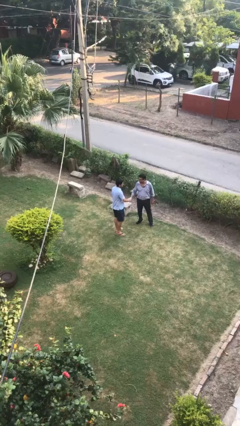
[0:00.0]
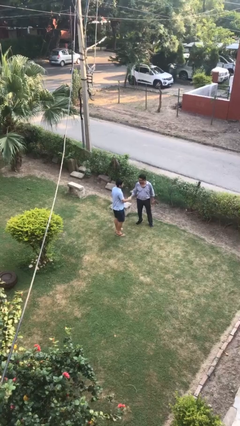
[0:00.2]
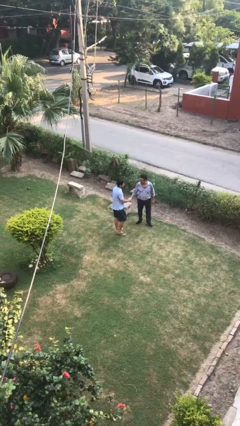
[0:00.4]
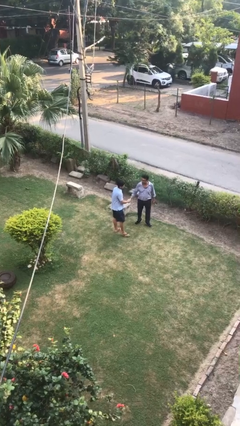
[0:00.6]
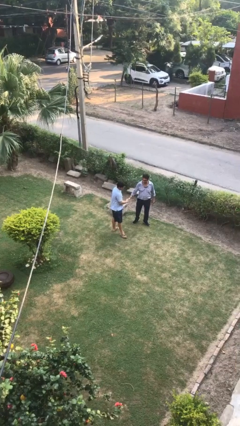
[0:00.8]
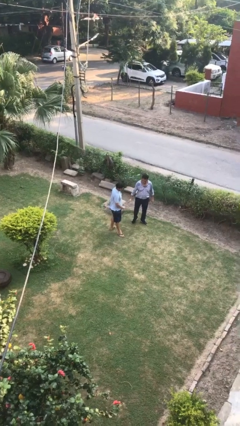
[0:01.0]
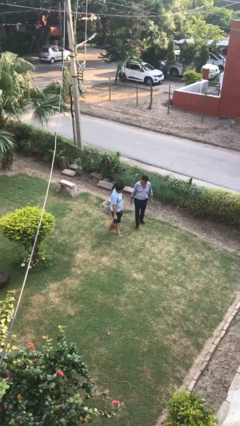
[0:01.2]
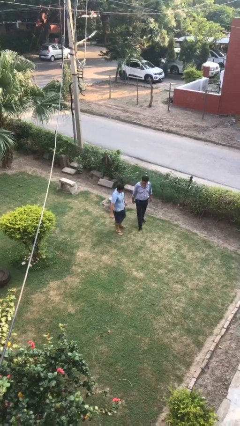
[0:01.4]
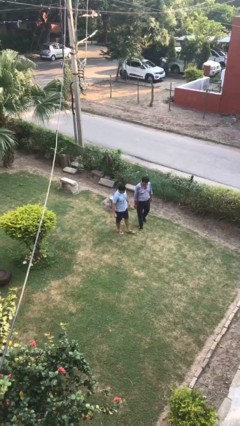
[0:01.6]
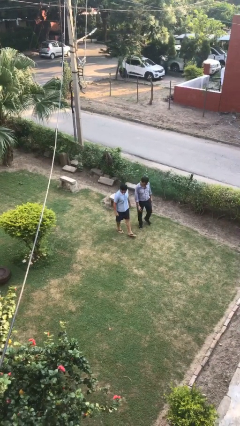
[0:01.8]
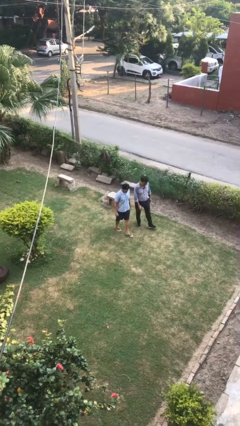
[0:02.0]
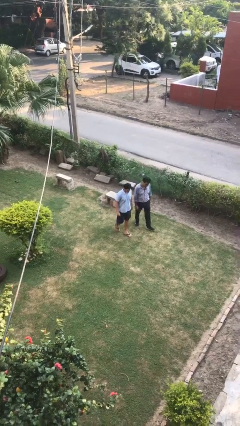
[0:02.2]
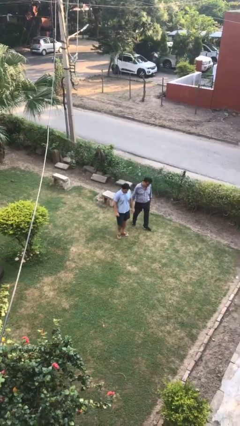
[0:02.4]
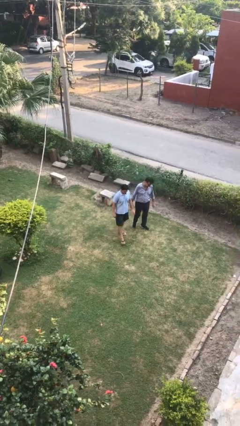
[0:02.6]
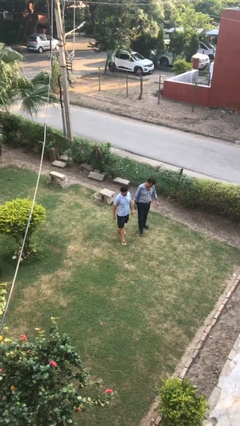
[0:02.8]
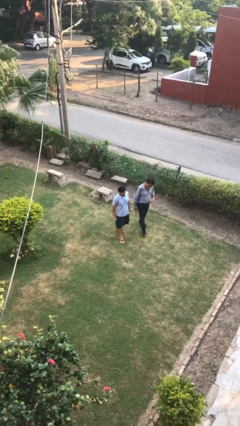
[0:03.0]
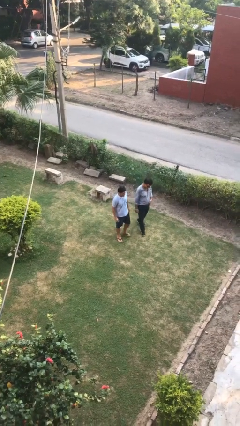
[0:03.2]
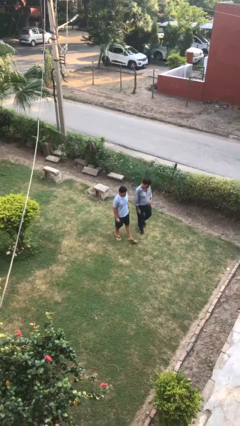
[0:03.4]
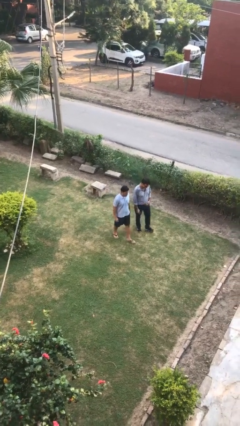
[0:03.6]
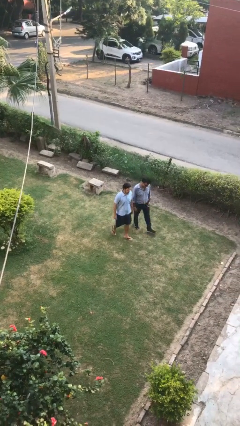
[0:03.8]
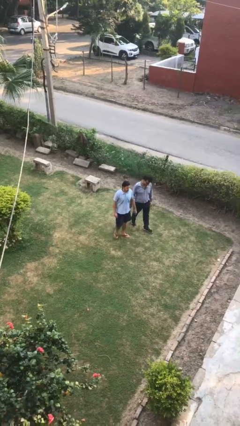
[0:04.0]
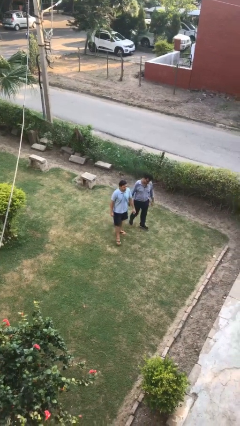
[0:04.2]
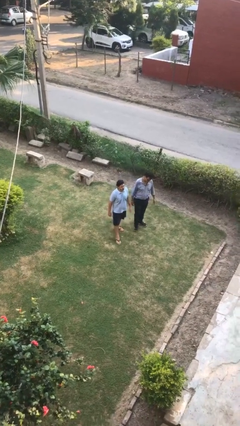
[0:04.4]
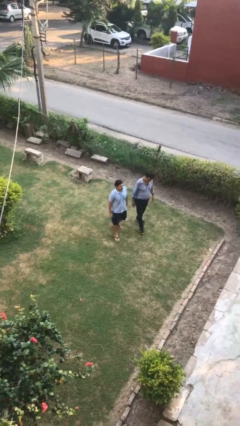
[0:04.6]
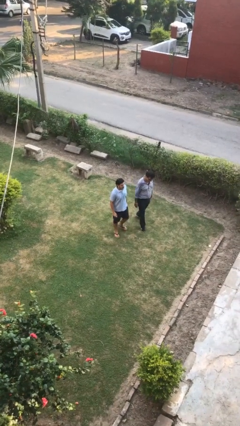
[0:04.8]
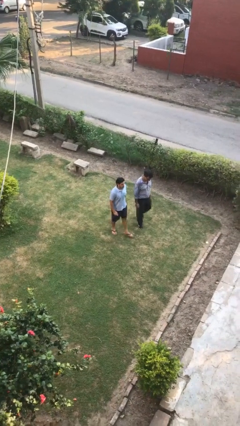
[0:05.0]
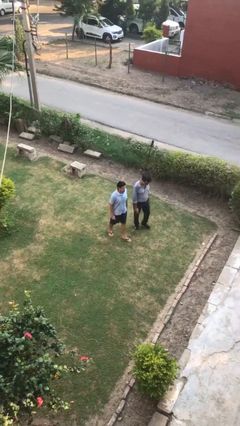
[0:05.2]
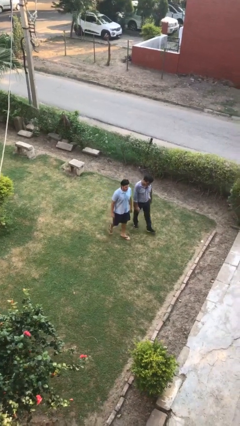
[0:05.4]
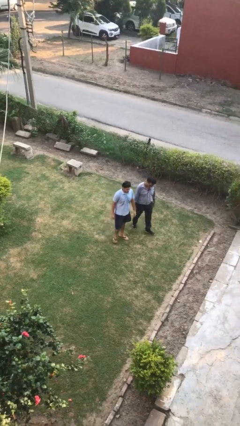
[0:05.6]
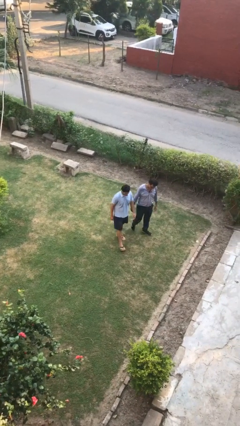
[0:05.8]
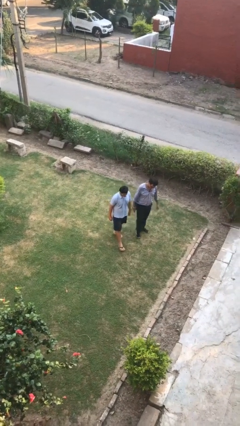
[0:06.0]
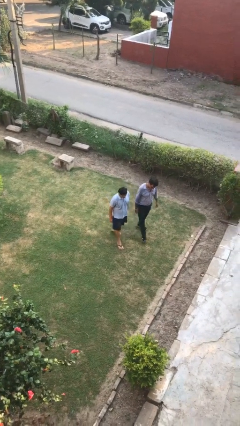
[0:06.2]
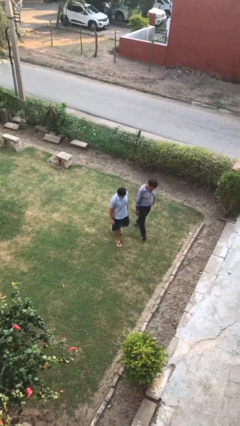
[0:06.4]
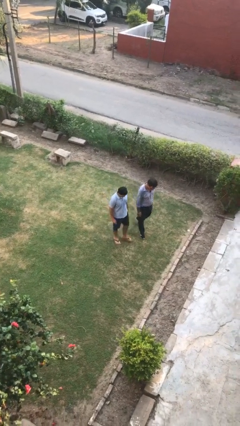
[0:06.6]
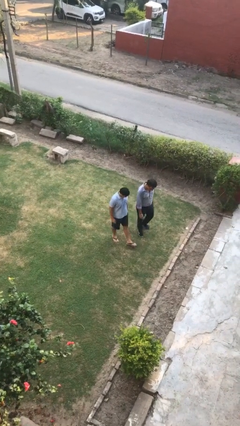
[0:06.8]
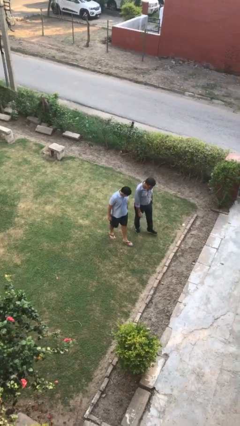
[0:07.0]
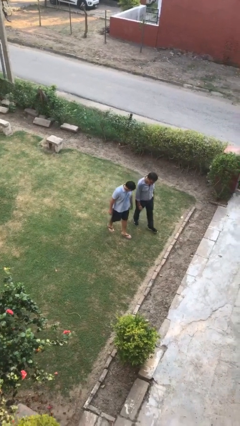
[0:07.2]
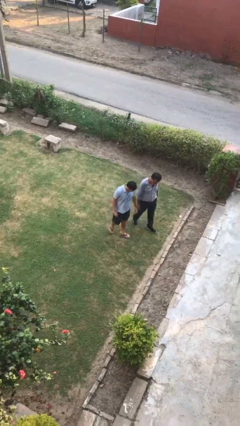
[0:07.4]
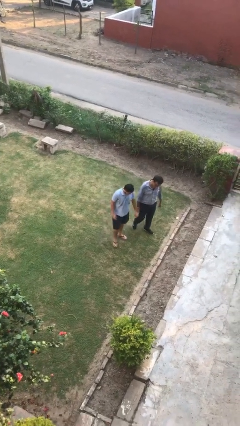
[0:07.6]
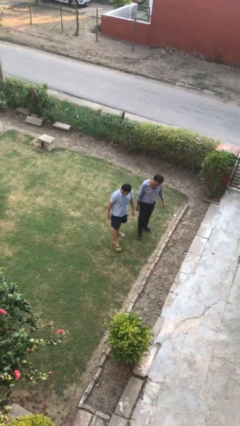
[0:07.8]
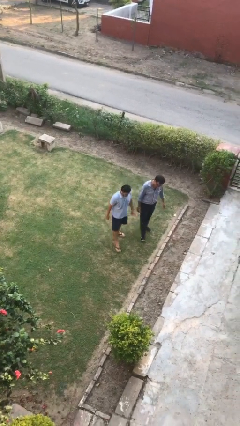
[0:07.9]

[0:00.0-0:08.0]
person talks to person

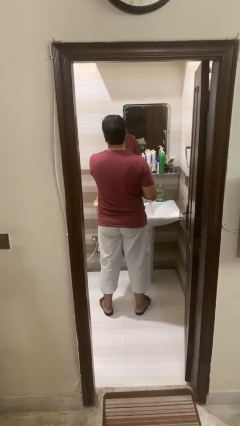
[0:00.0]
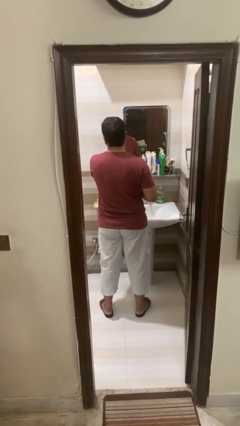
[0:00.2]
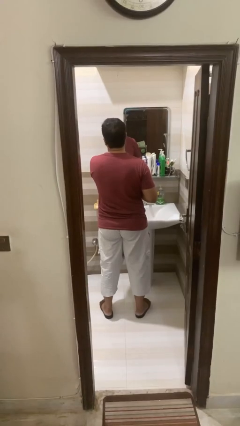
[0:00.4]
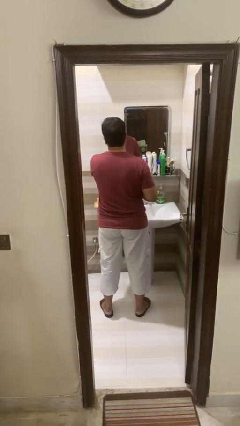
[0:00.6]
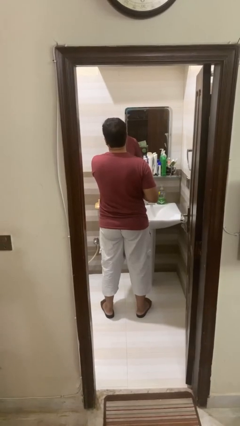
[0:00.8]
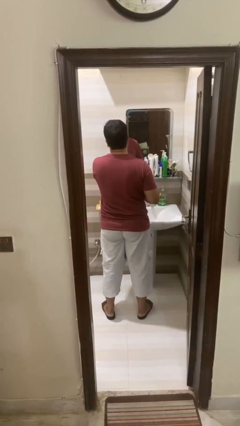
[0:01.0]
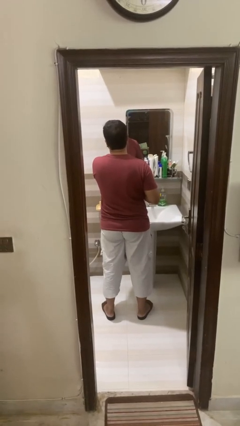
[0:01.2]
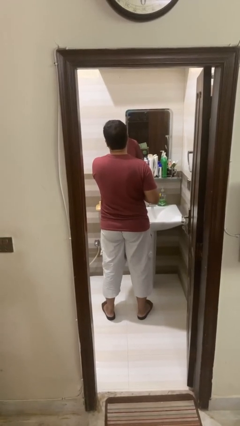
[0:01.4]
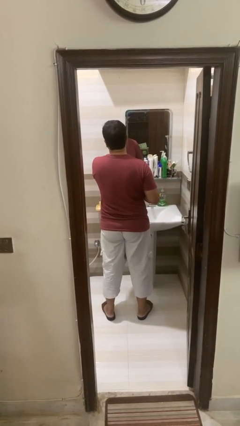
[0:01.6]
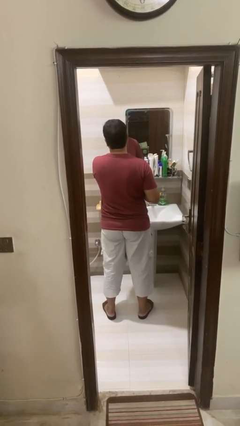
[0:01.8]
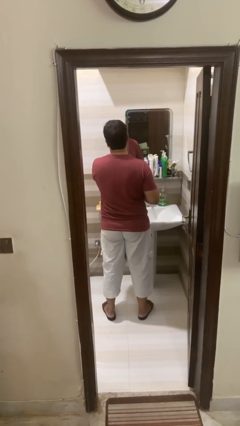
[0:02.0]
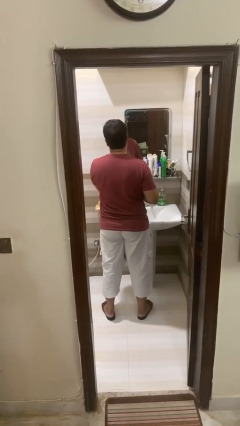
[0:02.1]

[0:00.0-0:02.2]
person applies shaving cream

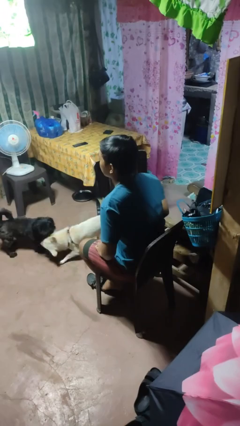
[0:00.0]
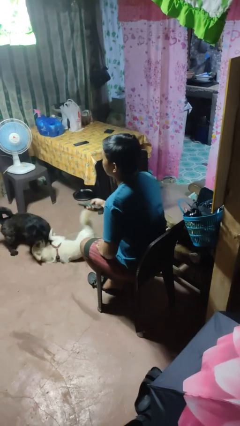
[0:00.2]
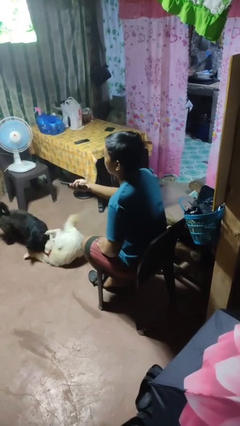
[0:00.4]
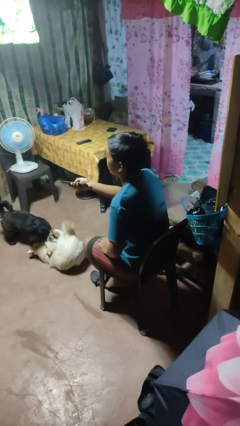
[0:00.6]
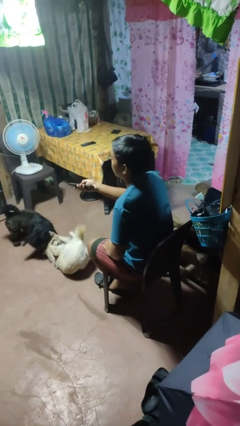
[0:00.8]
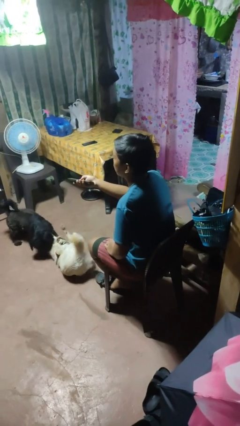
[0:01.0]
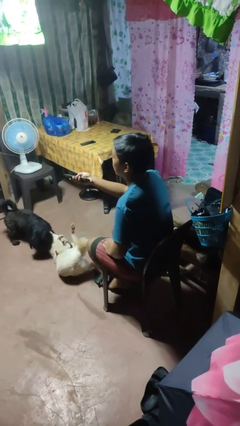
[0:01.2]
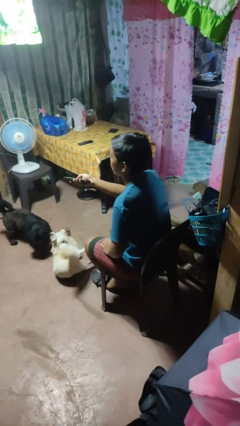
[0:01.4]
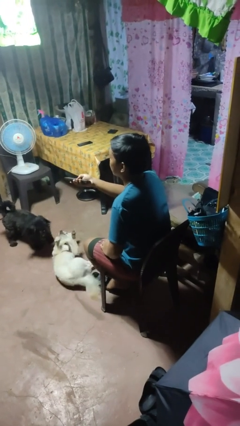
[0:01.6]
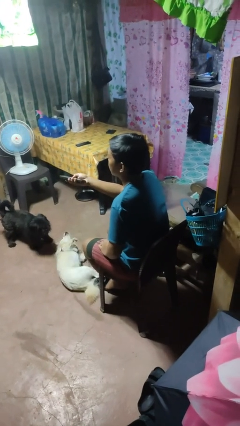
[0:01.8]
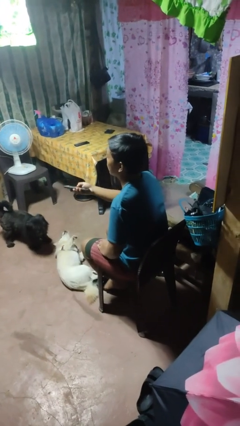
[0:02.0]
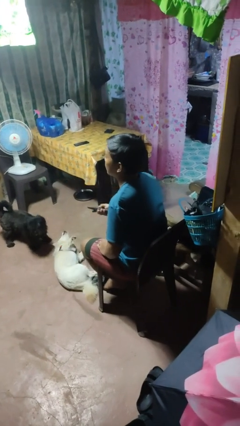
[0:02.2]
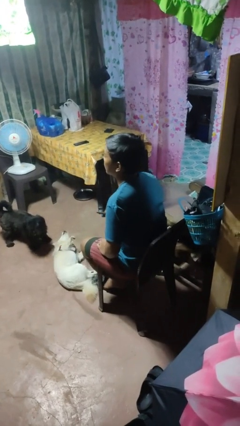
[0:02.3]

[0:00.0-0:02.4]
person uses television remote

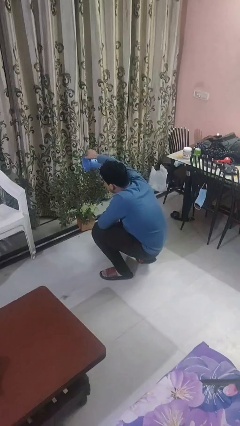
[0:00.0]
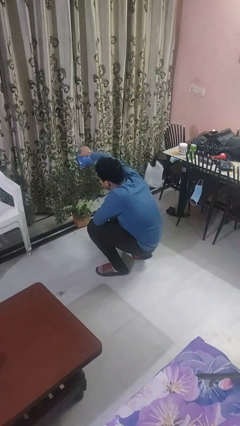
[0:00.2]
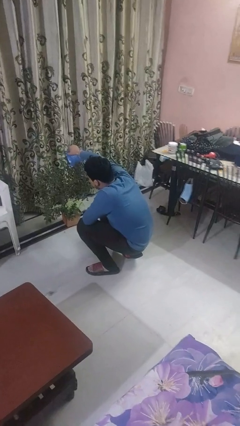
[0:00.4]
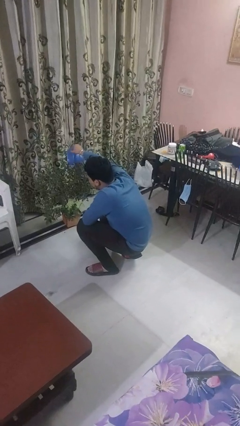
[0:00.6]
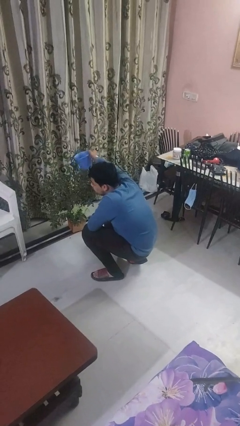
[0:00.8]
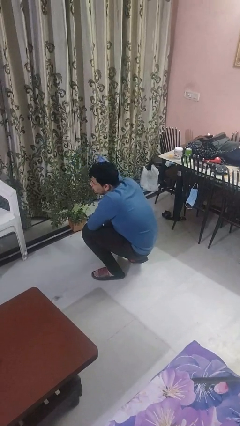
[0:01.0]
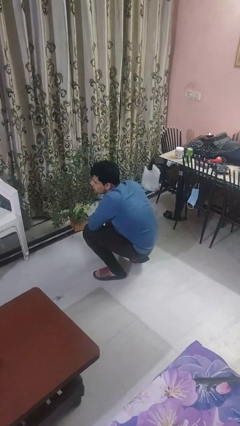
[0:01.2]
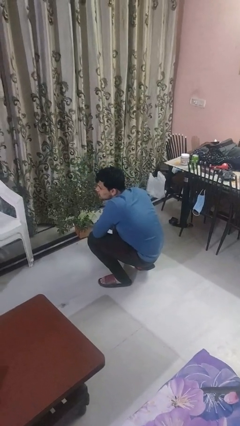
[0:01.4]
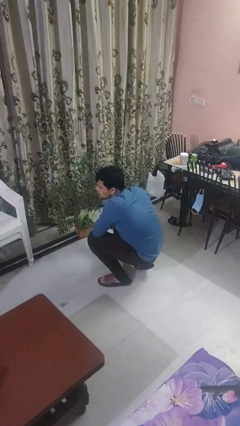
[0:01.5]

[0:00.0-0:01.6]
person waters houseplant

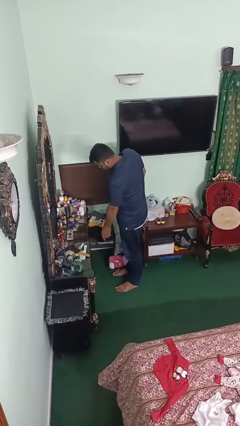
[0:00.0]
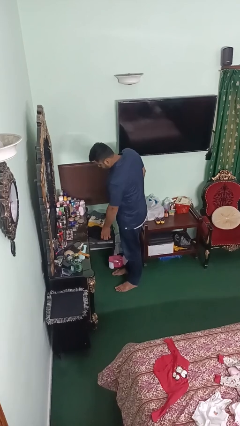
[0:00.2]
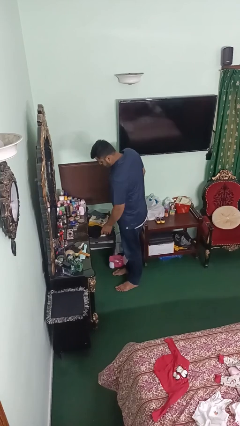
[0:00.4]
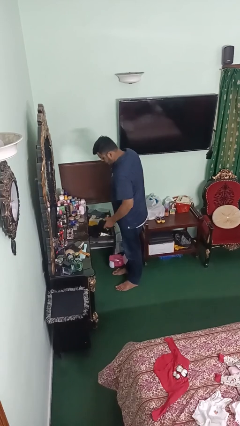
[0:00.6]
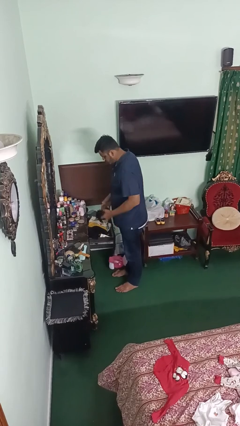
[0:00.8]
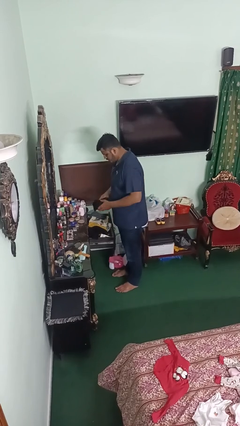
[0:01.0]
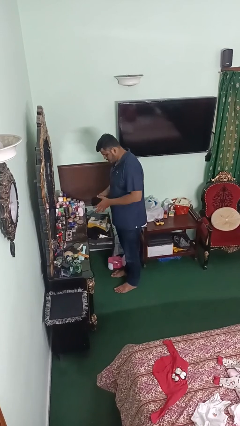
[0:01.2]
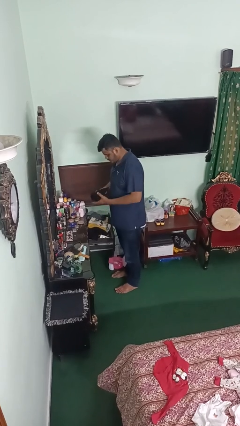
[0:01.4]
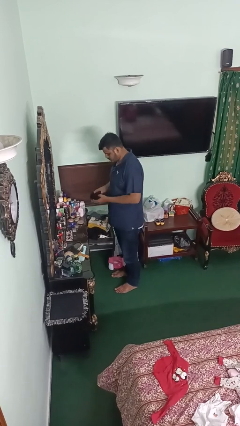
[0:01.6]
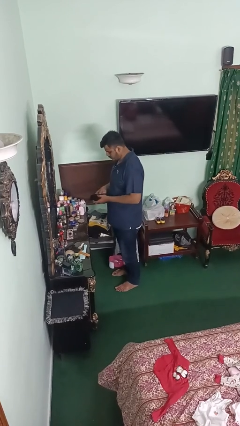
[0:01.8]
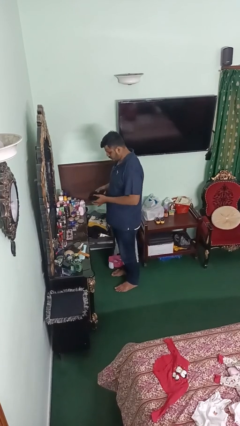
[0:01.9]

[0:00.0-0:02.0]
person takes clothes from dresser

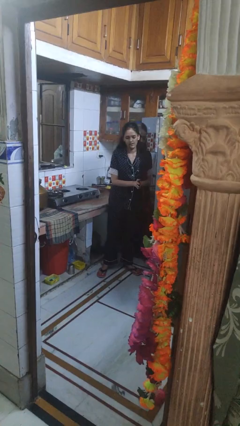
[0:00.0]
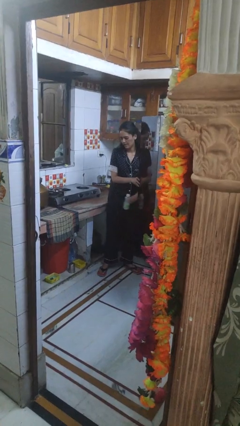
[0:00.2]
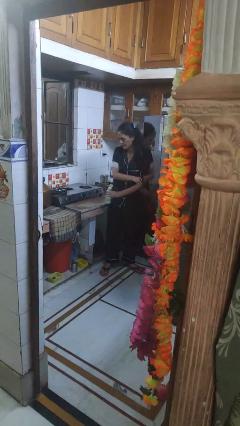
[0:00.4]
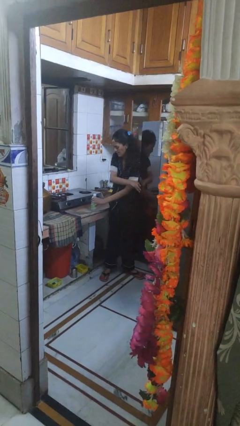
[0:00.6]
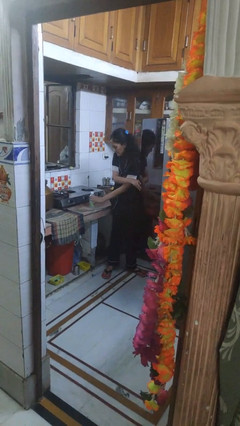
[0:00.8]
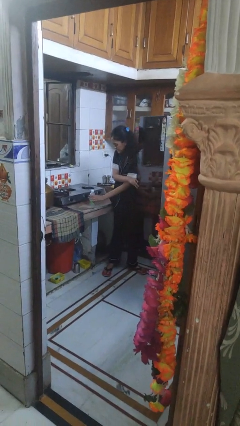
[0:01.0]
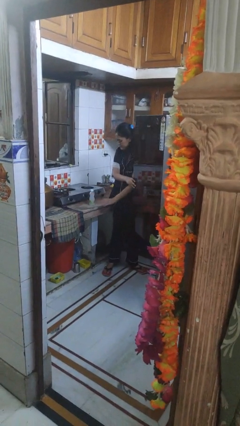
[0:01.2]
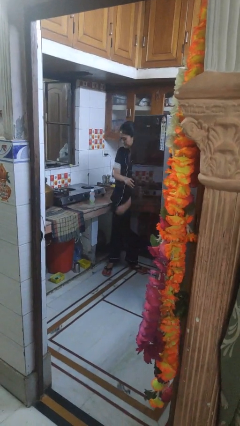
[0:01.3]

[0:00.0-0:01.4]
person takes object from refrigerator

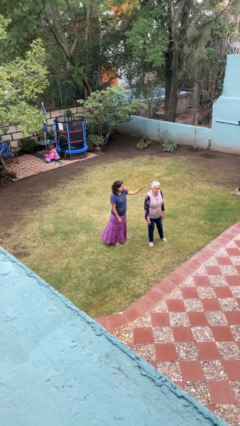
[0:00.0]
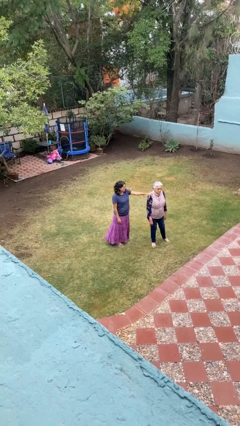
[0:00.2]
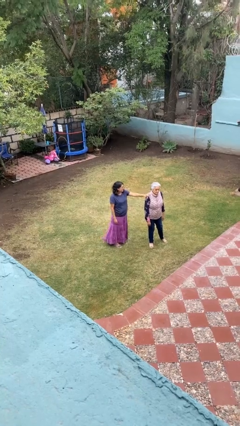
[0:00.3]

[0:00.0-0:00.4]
person grabs person by shoulder
